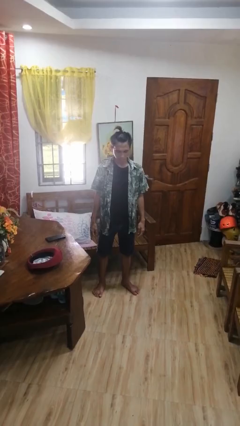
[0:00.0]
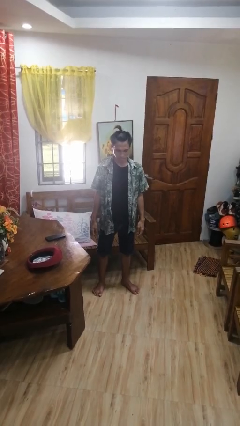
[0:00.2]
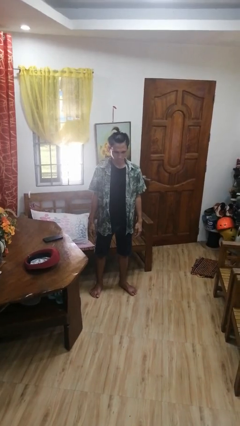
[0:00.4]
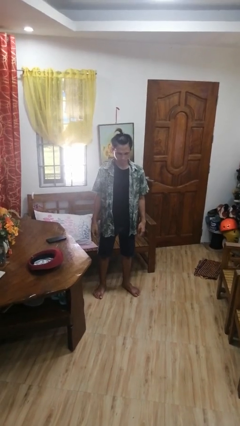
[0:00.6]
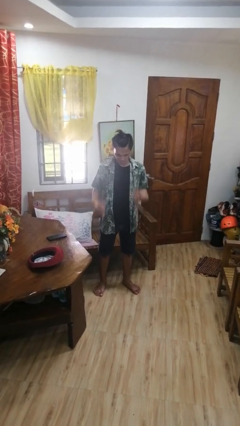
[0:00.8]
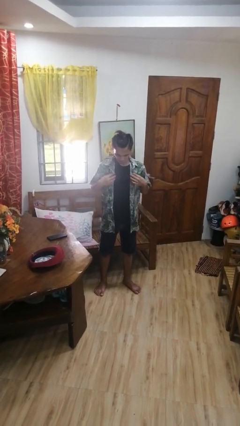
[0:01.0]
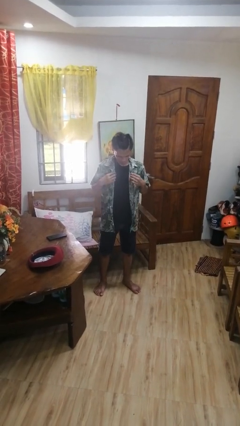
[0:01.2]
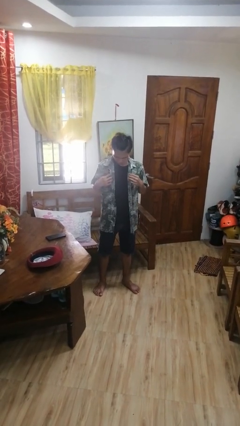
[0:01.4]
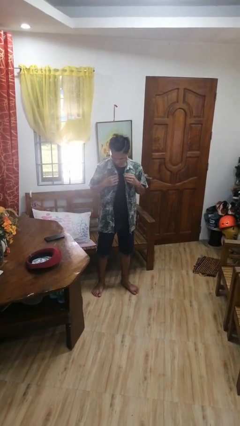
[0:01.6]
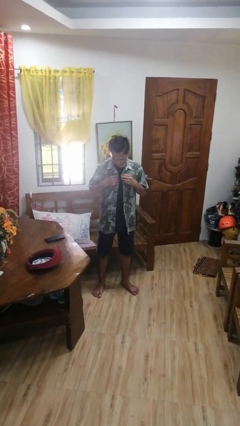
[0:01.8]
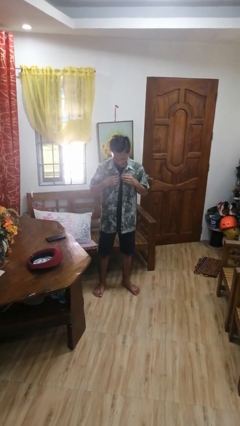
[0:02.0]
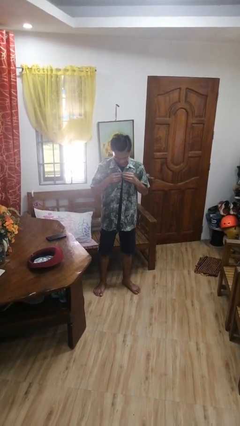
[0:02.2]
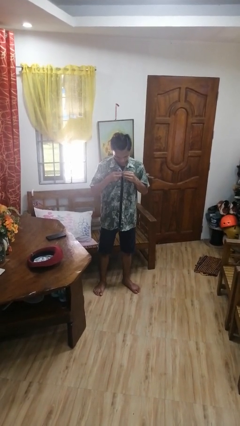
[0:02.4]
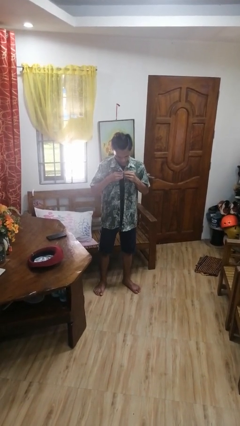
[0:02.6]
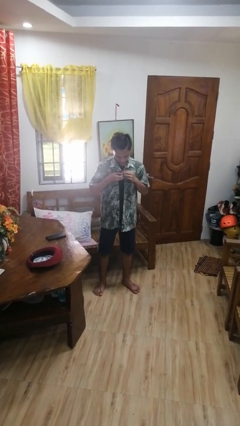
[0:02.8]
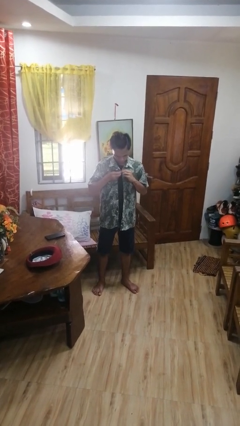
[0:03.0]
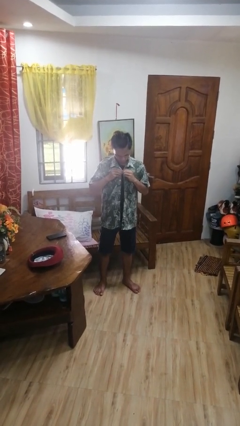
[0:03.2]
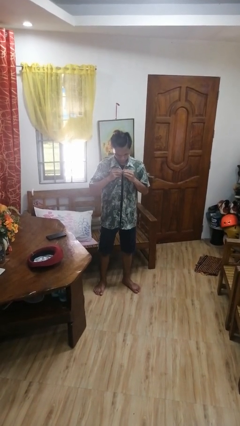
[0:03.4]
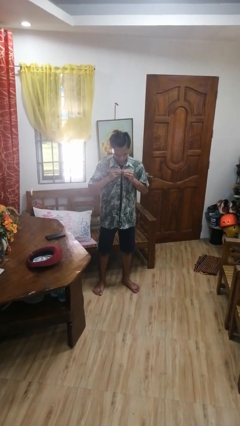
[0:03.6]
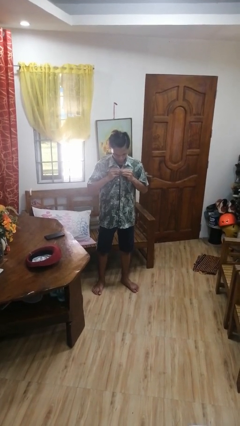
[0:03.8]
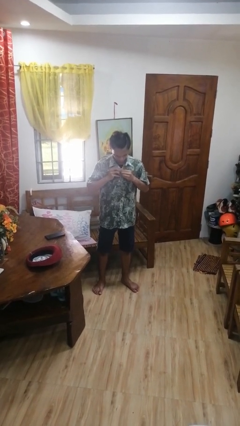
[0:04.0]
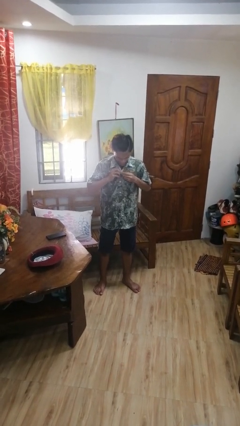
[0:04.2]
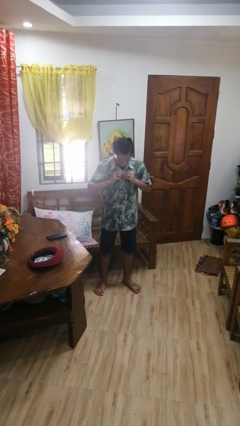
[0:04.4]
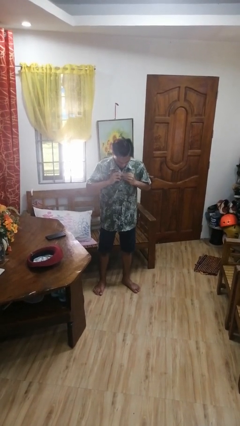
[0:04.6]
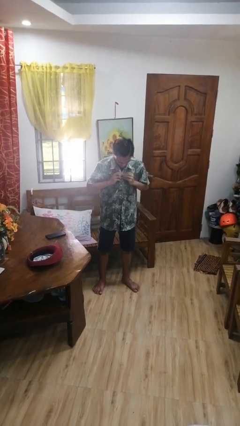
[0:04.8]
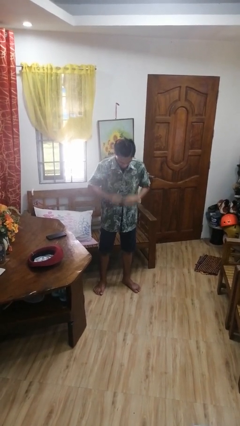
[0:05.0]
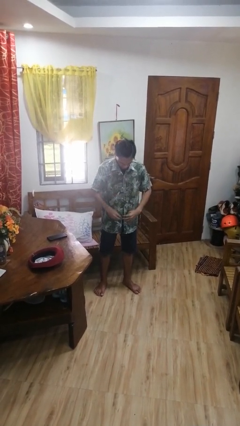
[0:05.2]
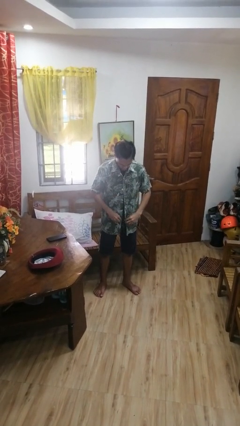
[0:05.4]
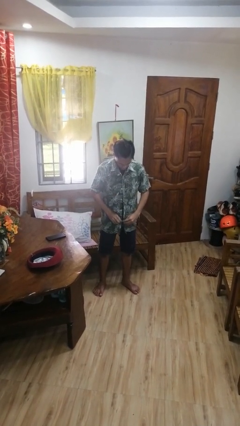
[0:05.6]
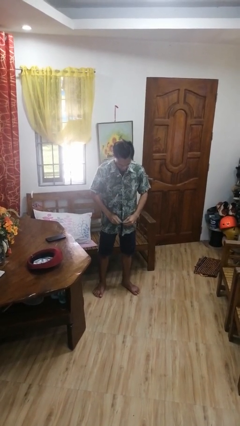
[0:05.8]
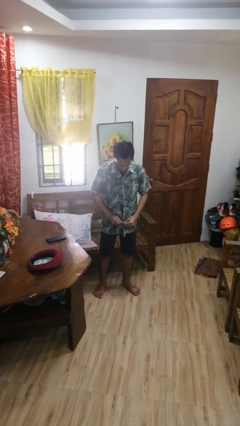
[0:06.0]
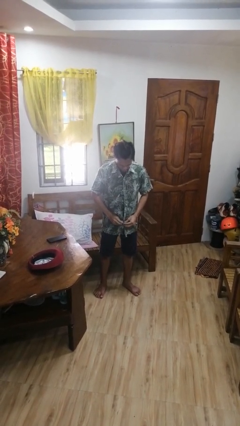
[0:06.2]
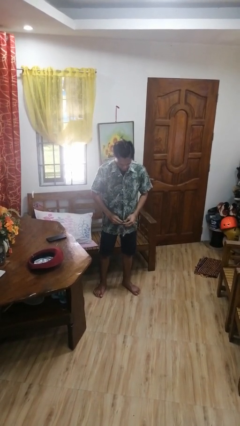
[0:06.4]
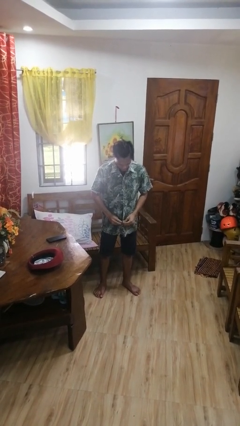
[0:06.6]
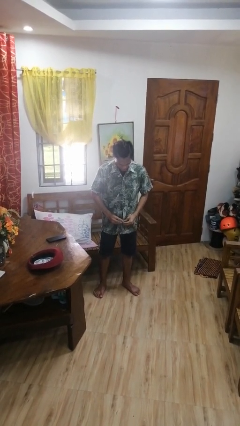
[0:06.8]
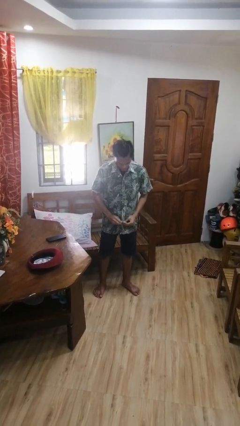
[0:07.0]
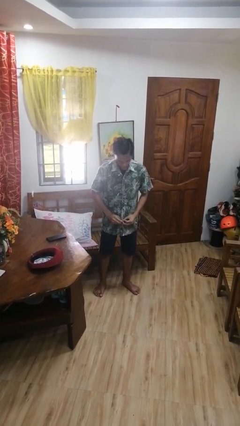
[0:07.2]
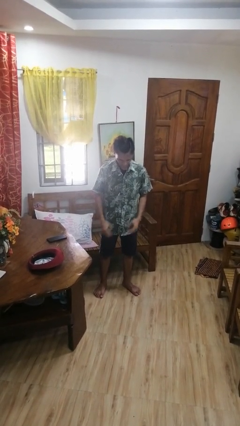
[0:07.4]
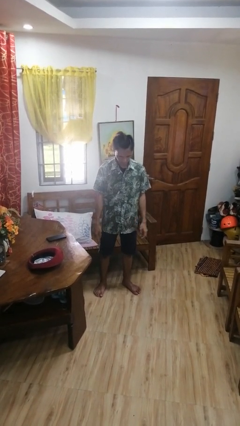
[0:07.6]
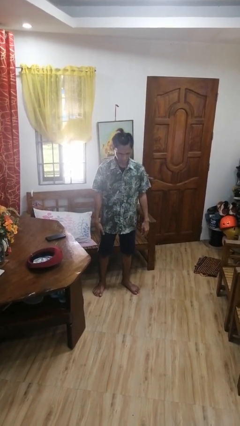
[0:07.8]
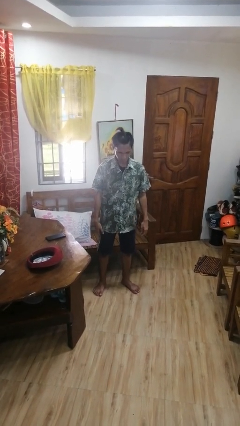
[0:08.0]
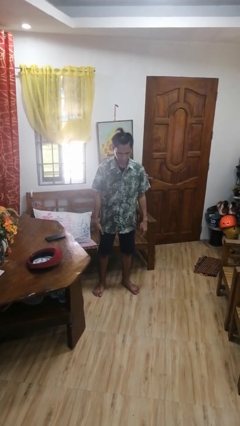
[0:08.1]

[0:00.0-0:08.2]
person buttons shirt

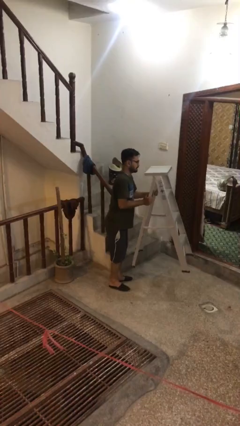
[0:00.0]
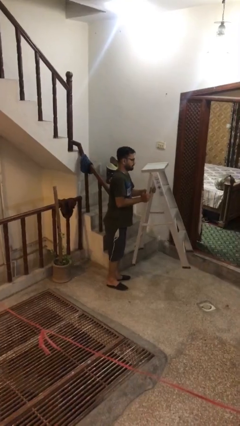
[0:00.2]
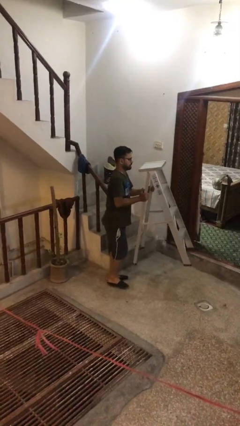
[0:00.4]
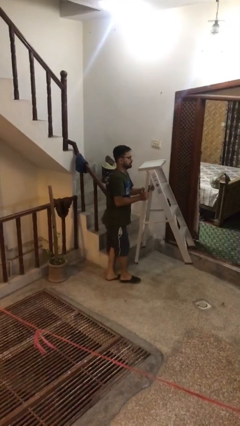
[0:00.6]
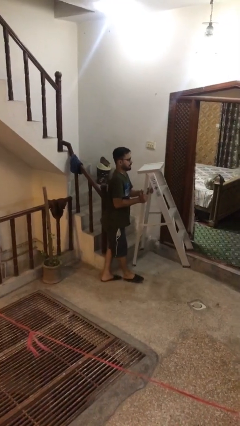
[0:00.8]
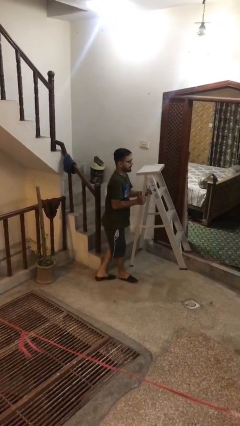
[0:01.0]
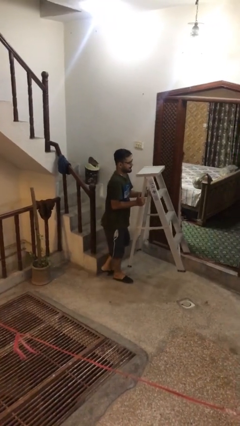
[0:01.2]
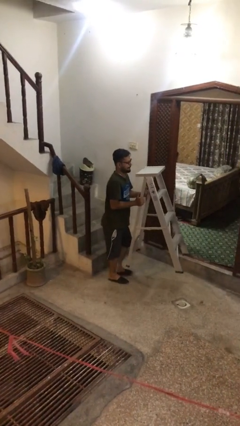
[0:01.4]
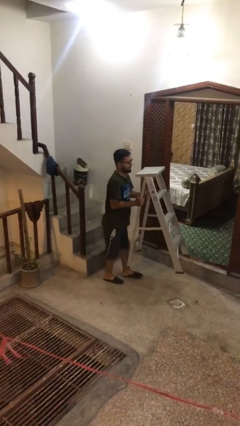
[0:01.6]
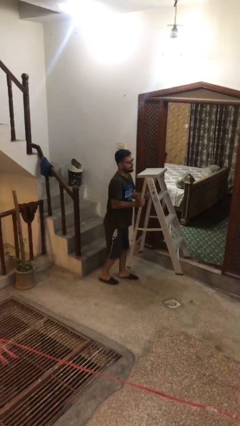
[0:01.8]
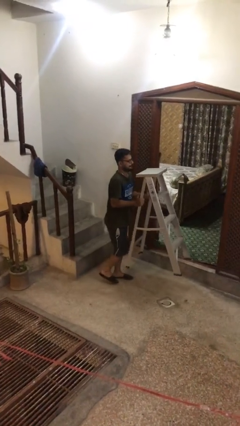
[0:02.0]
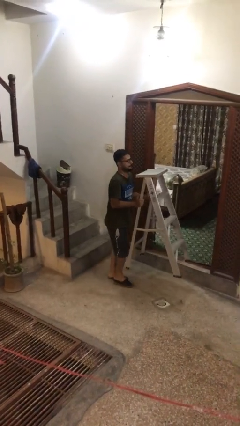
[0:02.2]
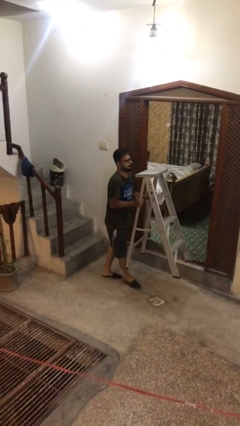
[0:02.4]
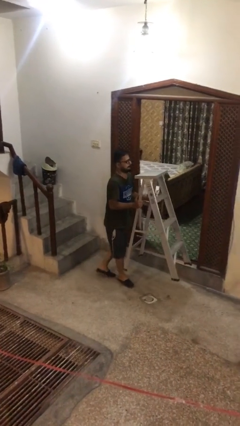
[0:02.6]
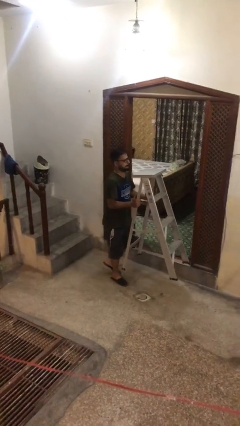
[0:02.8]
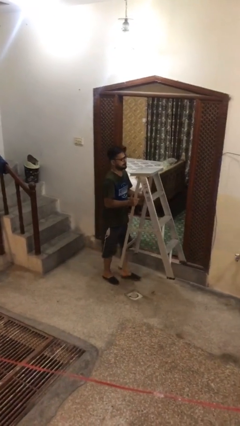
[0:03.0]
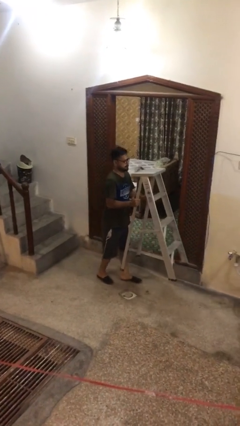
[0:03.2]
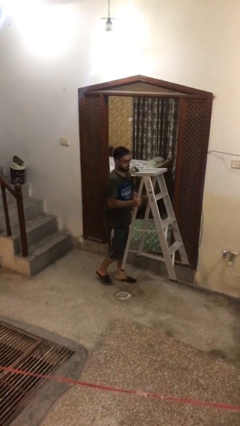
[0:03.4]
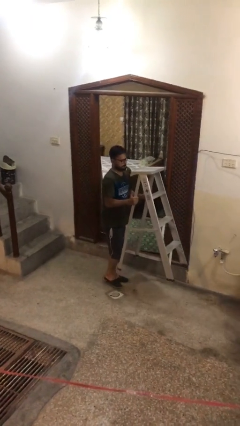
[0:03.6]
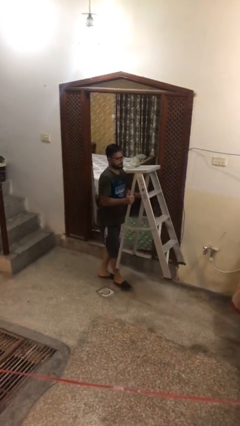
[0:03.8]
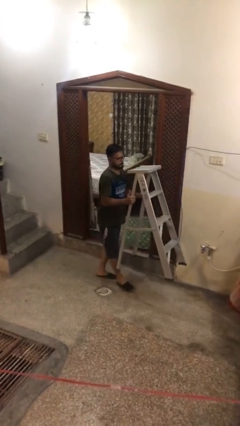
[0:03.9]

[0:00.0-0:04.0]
person carries heavy object

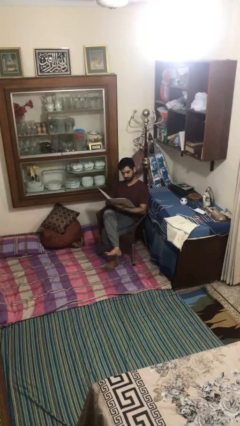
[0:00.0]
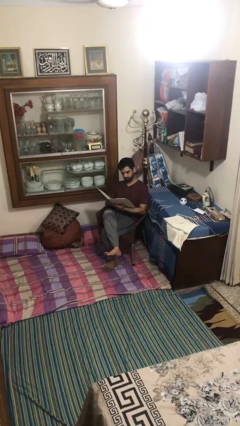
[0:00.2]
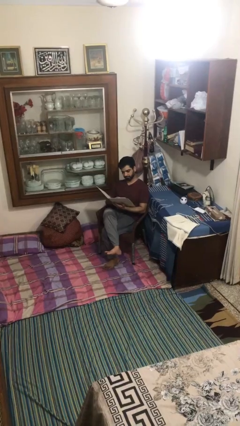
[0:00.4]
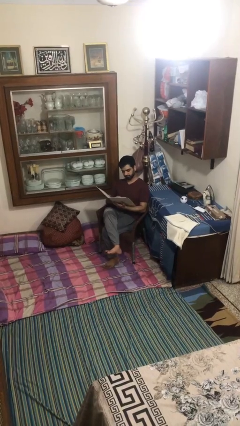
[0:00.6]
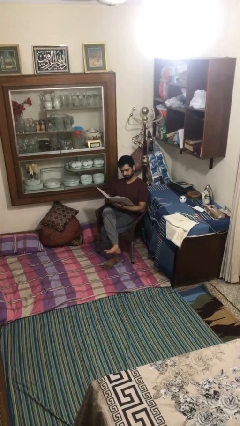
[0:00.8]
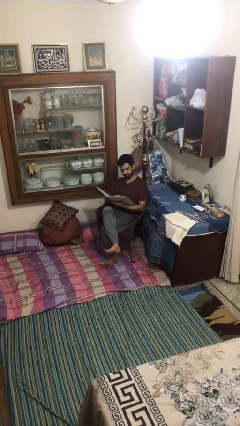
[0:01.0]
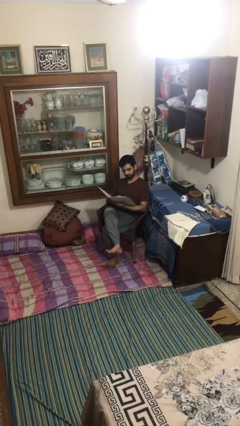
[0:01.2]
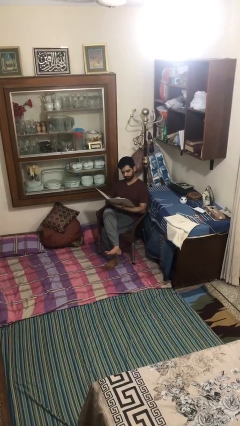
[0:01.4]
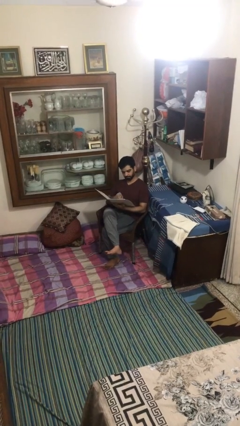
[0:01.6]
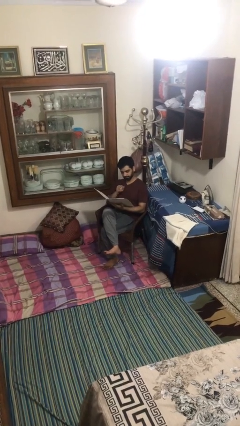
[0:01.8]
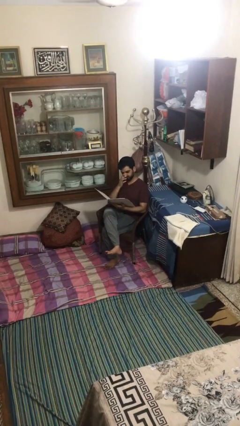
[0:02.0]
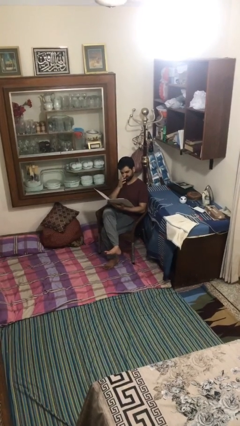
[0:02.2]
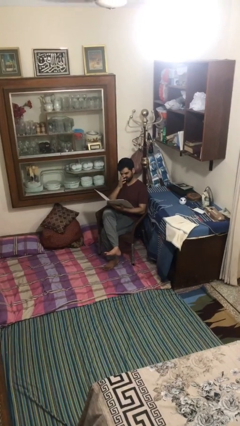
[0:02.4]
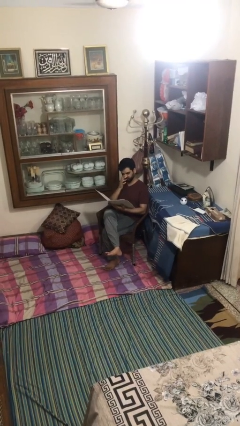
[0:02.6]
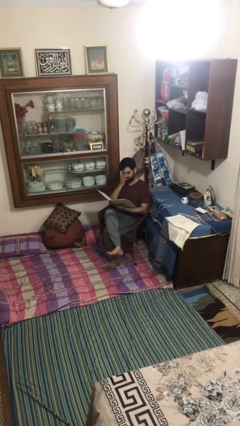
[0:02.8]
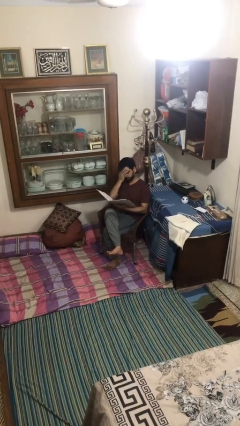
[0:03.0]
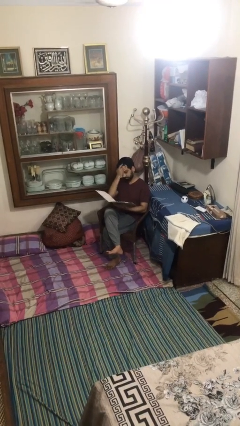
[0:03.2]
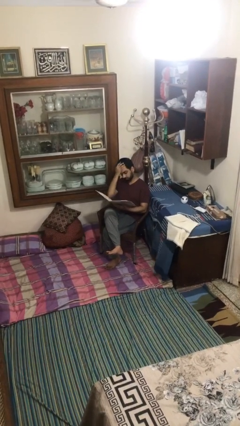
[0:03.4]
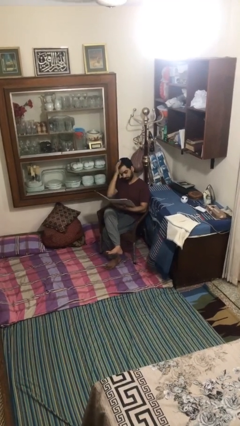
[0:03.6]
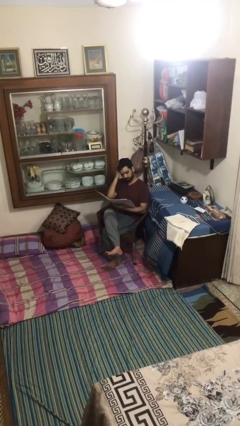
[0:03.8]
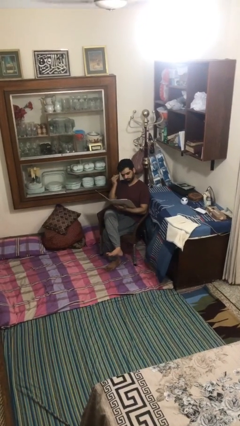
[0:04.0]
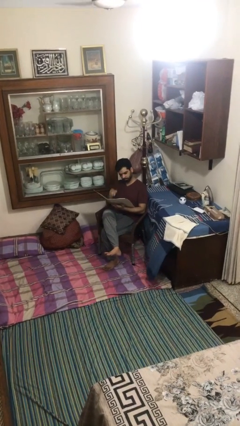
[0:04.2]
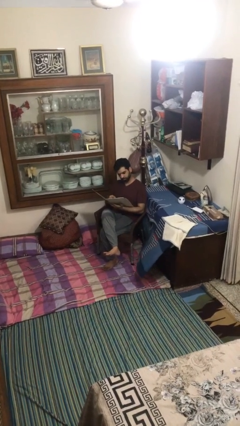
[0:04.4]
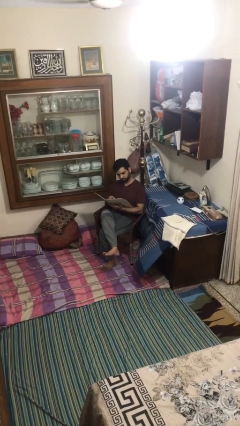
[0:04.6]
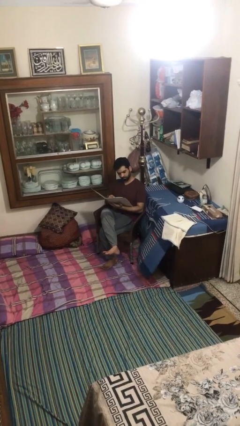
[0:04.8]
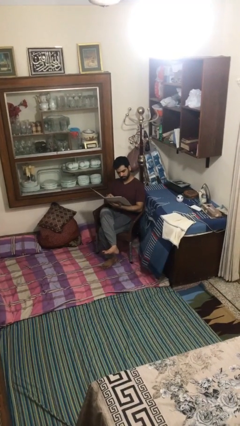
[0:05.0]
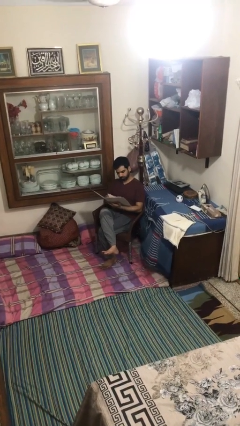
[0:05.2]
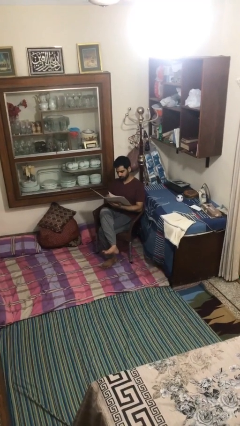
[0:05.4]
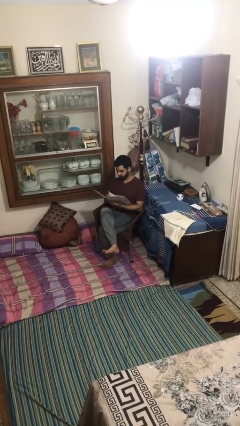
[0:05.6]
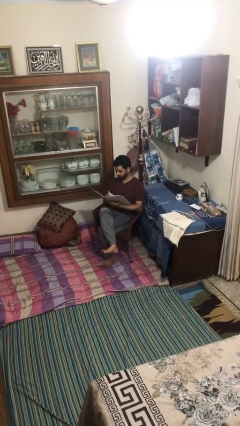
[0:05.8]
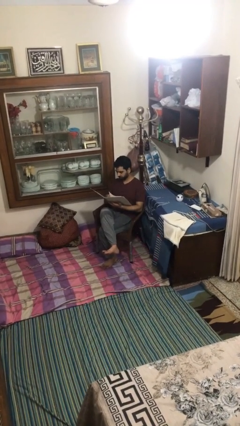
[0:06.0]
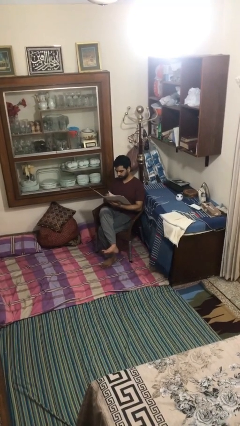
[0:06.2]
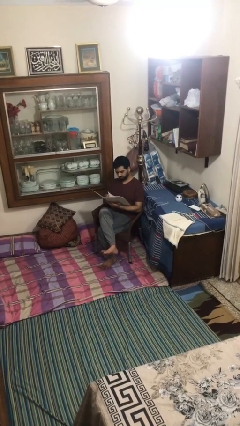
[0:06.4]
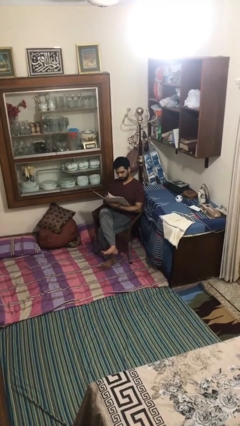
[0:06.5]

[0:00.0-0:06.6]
person reads document
